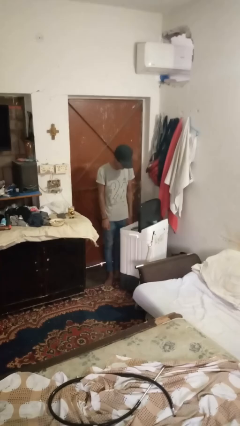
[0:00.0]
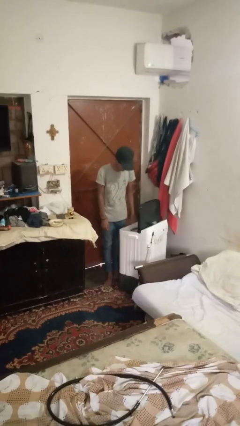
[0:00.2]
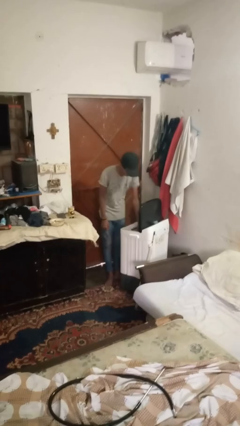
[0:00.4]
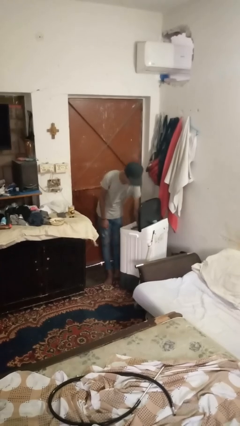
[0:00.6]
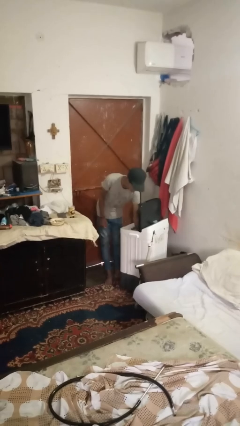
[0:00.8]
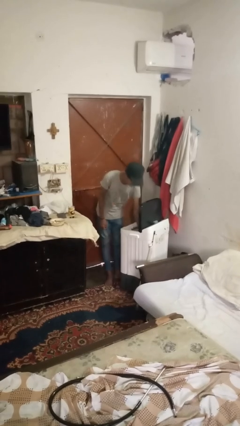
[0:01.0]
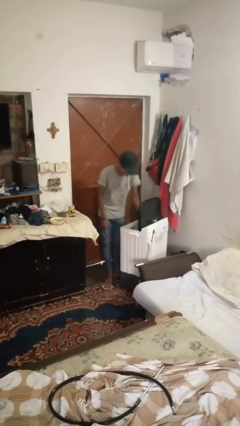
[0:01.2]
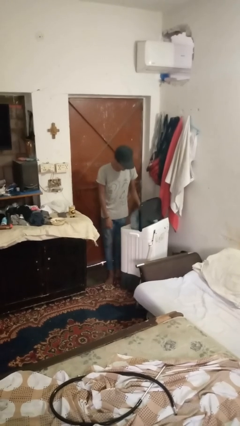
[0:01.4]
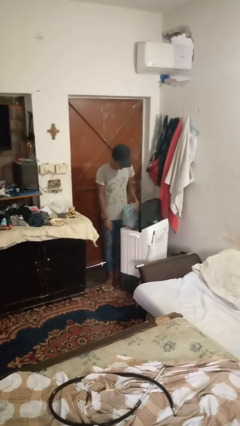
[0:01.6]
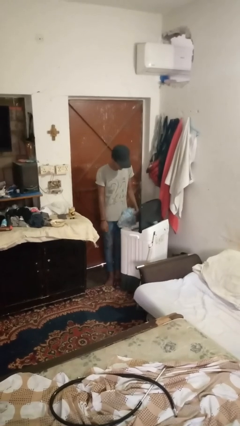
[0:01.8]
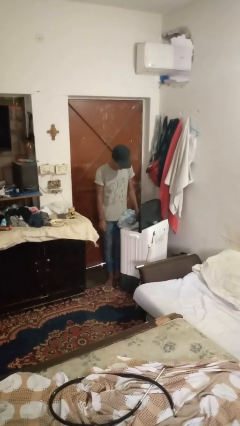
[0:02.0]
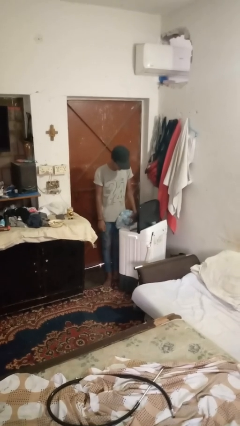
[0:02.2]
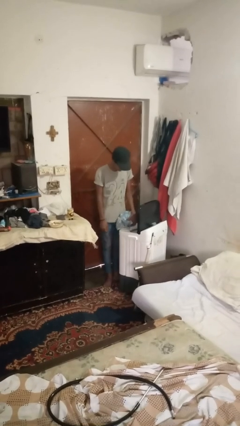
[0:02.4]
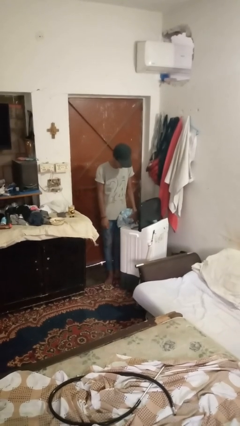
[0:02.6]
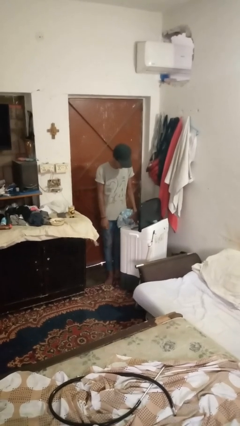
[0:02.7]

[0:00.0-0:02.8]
person unloads clotheswasher

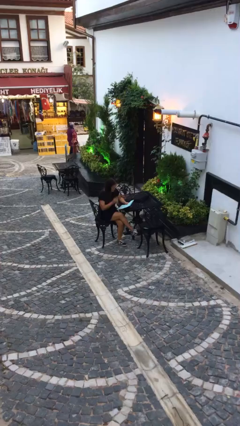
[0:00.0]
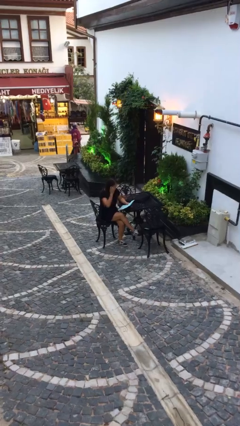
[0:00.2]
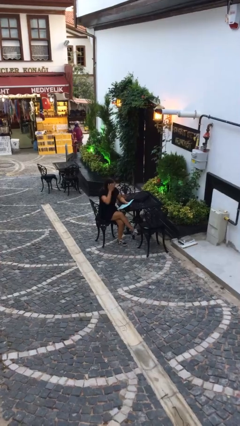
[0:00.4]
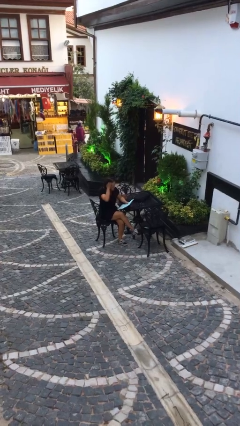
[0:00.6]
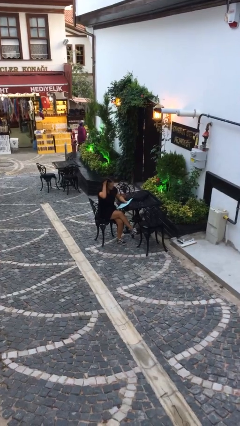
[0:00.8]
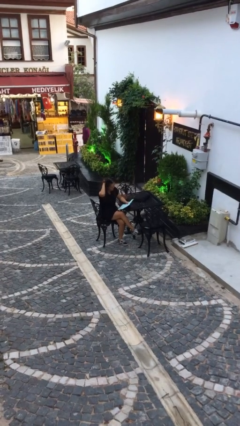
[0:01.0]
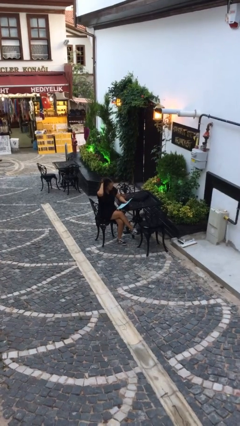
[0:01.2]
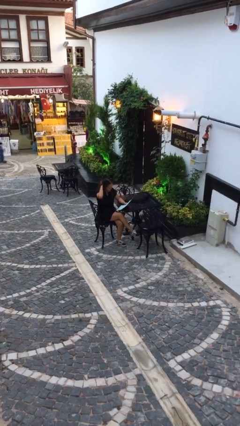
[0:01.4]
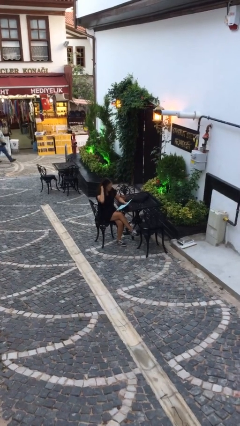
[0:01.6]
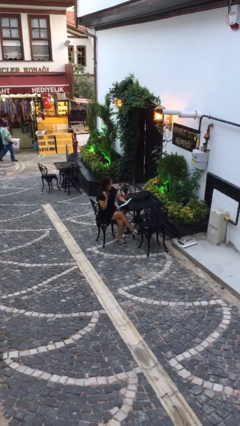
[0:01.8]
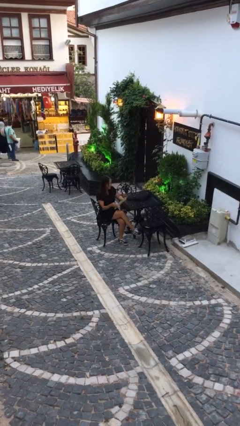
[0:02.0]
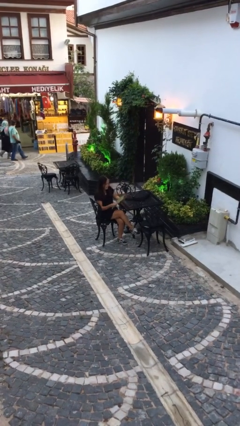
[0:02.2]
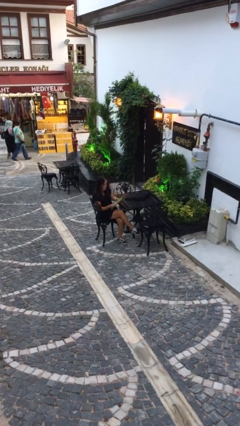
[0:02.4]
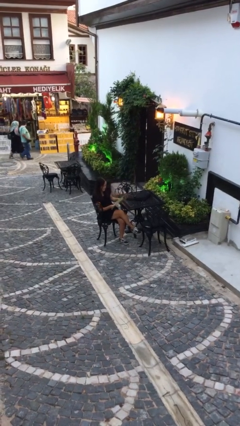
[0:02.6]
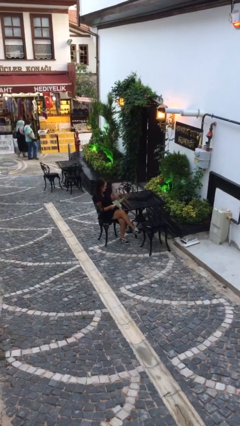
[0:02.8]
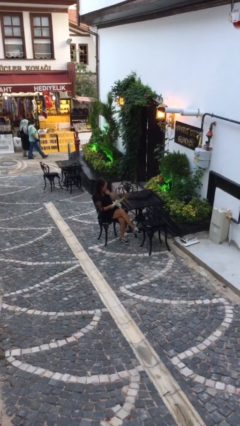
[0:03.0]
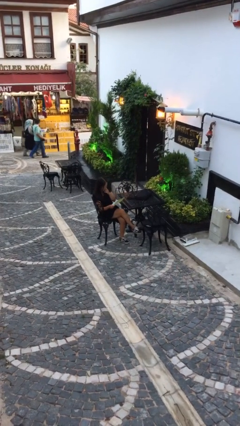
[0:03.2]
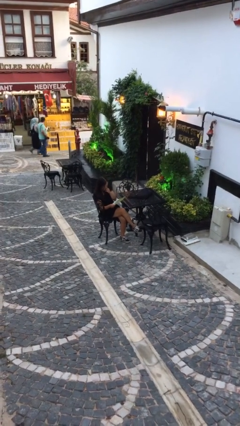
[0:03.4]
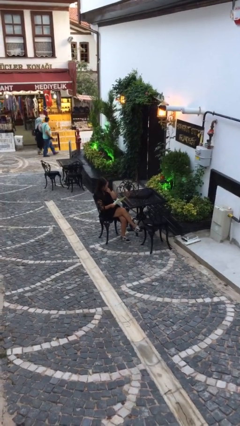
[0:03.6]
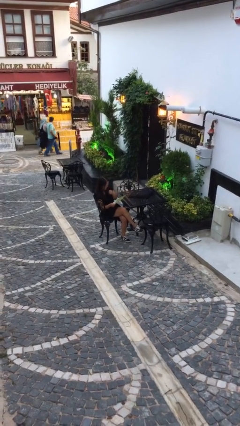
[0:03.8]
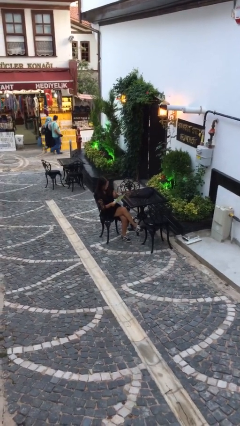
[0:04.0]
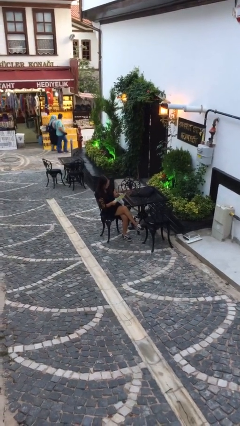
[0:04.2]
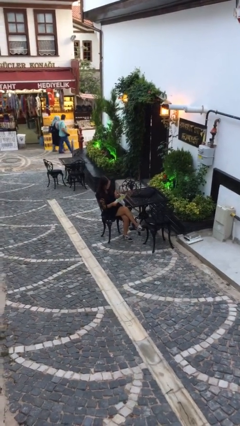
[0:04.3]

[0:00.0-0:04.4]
person reads document

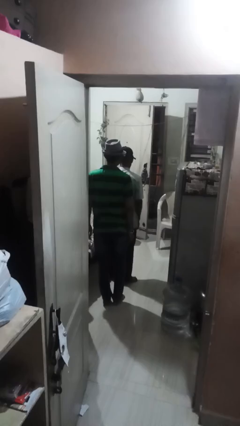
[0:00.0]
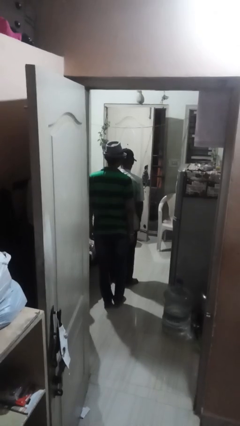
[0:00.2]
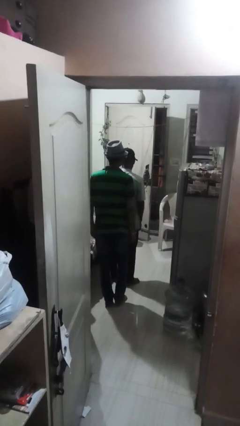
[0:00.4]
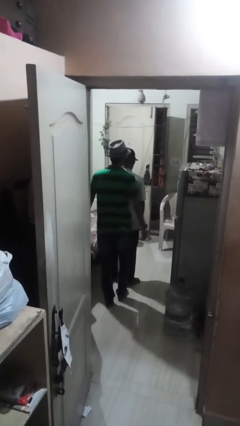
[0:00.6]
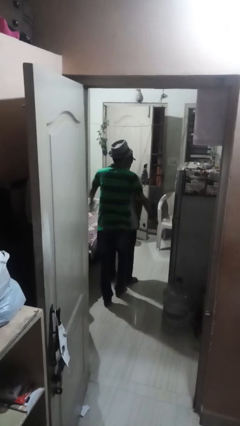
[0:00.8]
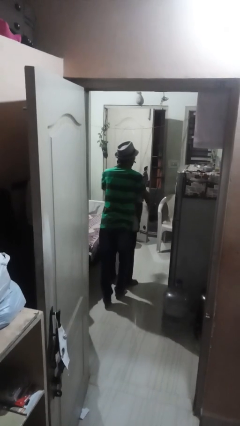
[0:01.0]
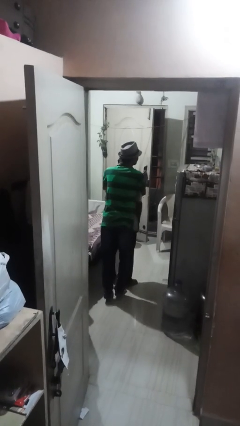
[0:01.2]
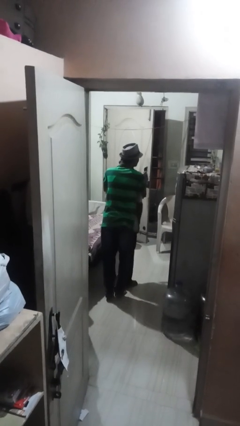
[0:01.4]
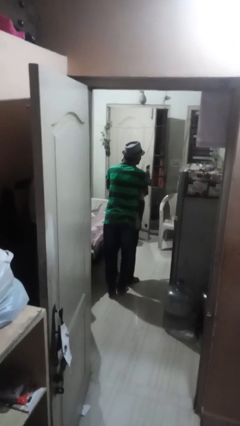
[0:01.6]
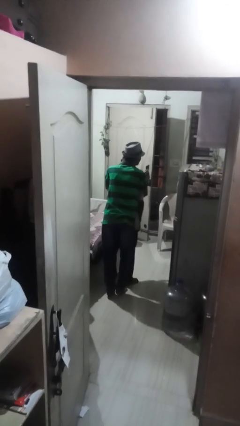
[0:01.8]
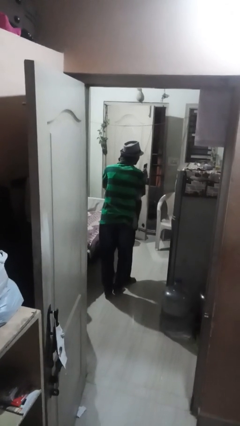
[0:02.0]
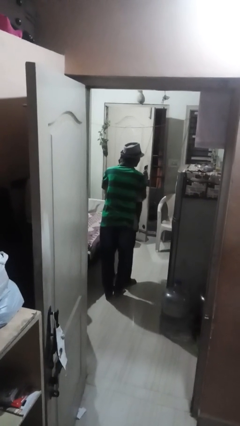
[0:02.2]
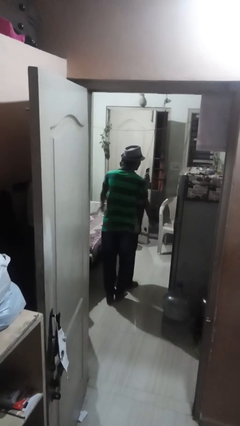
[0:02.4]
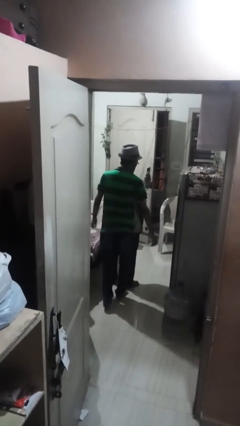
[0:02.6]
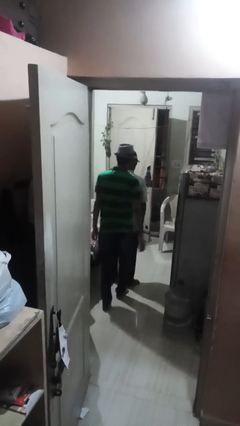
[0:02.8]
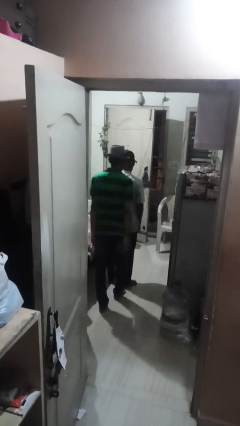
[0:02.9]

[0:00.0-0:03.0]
person hugs person from behind

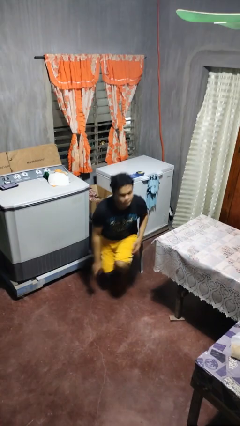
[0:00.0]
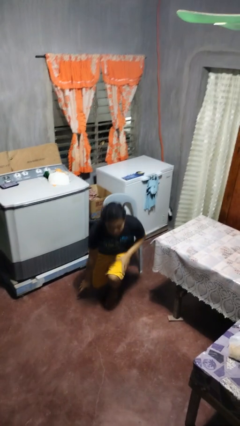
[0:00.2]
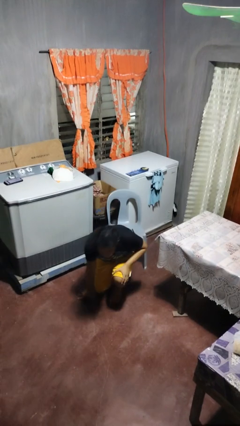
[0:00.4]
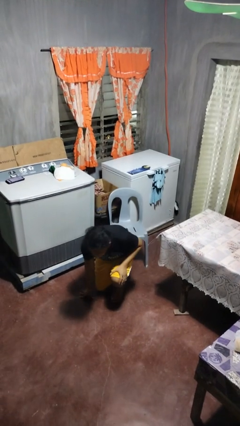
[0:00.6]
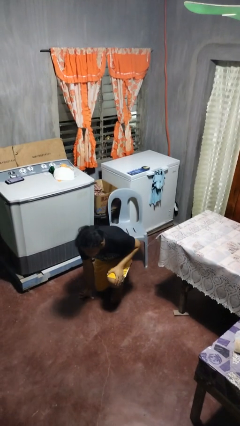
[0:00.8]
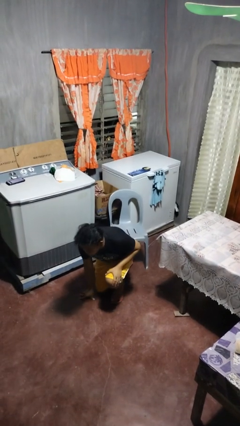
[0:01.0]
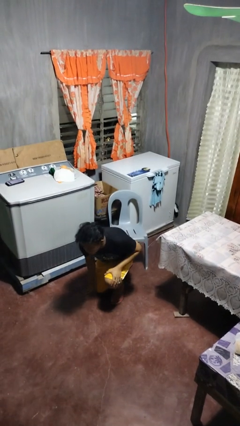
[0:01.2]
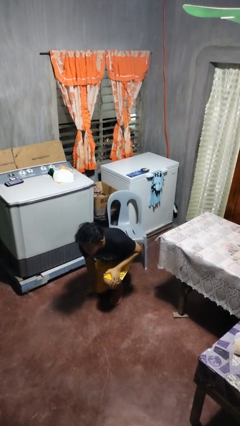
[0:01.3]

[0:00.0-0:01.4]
person falls from chair

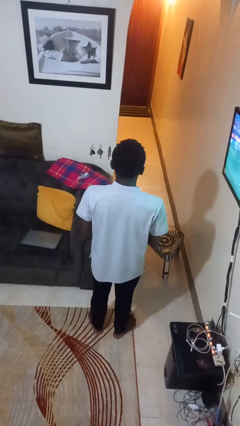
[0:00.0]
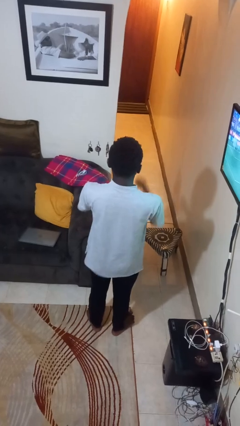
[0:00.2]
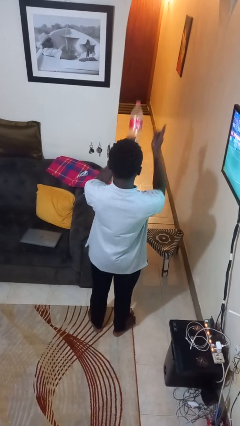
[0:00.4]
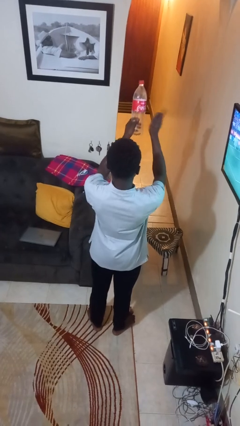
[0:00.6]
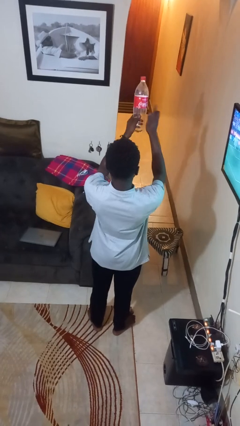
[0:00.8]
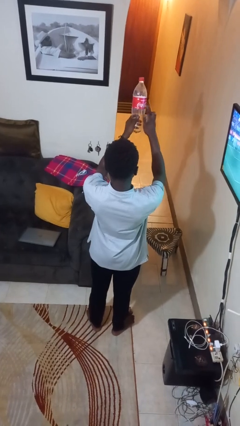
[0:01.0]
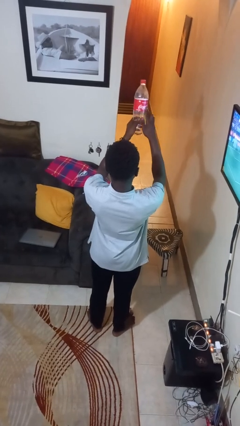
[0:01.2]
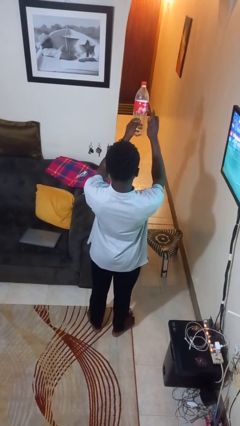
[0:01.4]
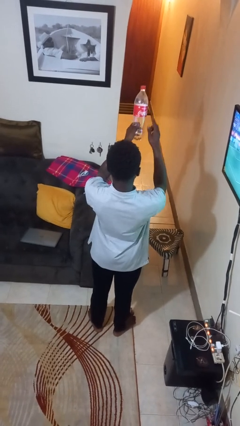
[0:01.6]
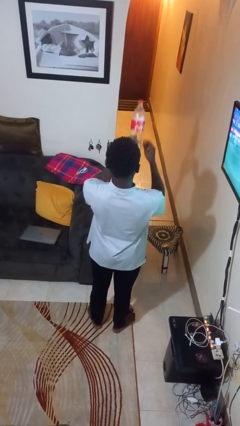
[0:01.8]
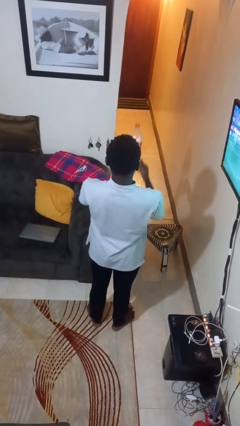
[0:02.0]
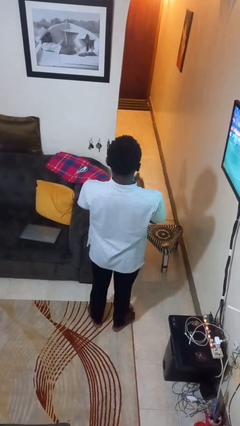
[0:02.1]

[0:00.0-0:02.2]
person taps object with finger

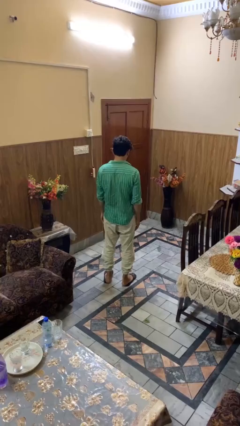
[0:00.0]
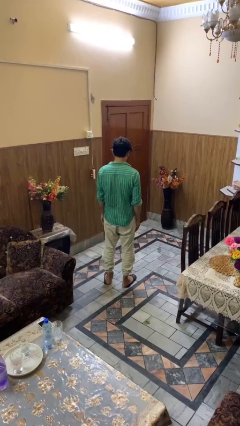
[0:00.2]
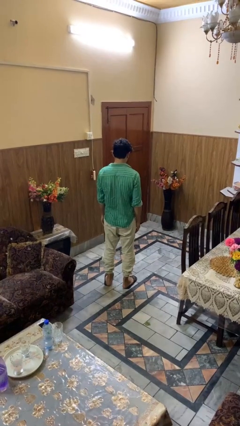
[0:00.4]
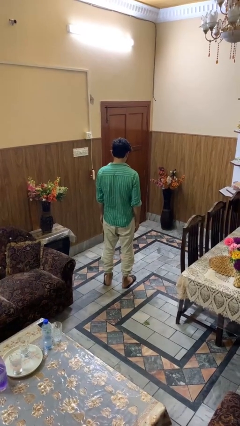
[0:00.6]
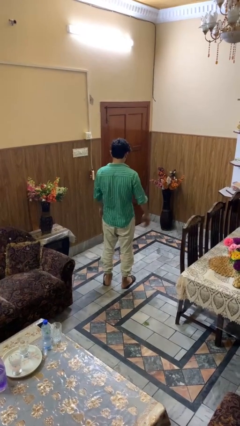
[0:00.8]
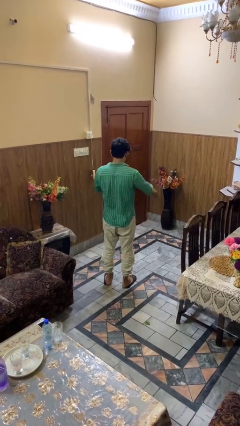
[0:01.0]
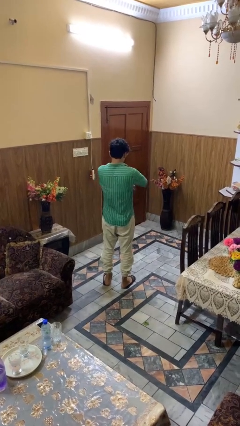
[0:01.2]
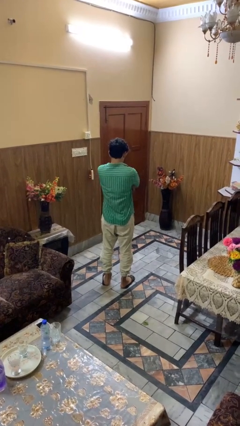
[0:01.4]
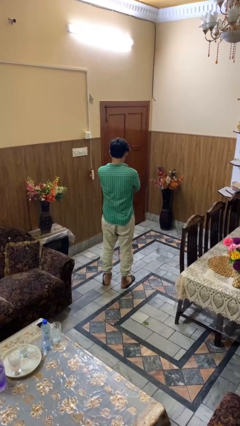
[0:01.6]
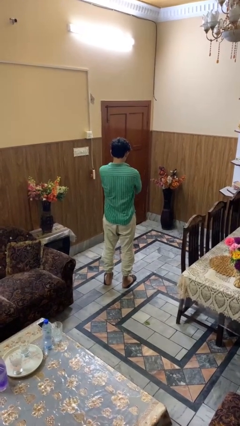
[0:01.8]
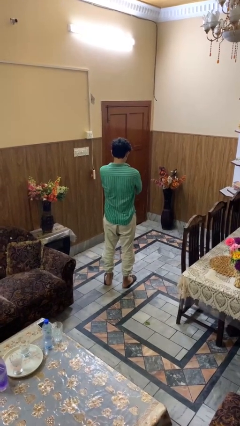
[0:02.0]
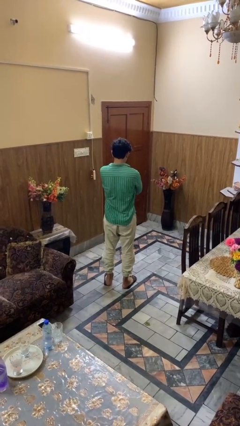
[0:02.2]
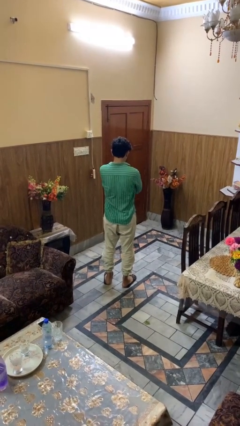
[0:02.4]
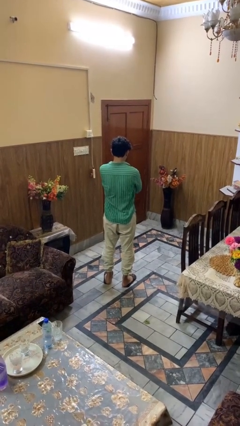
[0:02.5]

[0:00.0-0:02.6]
person crosses arms

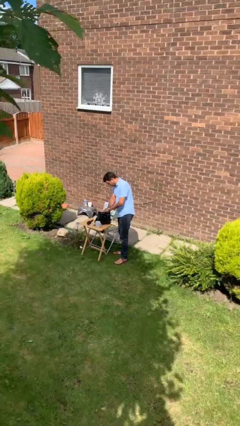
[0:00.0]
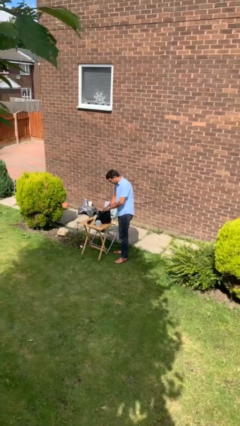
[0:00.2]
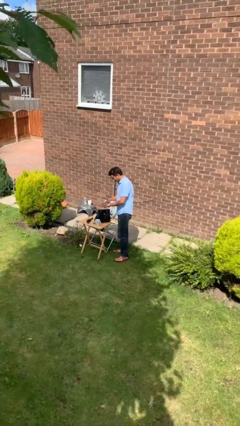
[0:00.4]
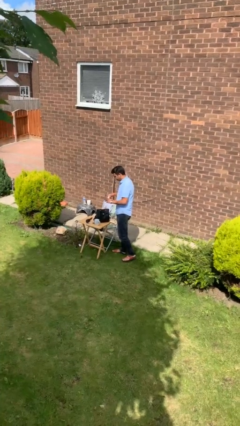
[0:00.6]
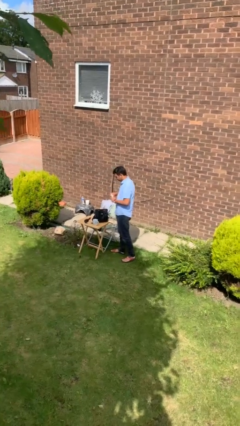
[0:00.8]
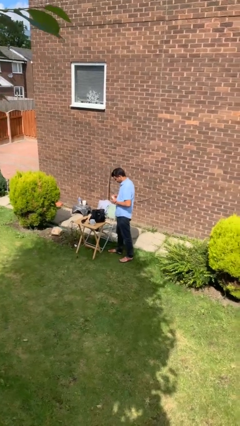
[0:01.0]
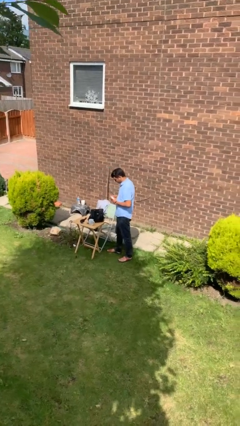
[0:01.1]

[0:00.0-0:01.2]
person takes object from backpack
